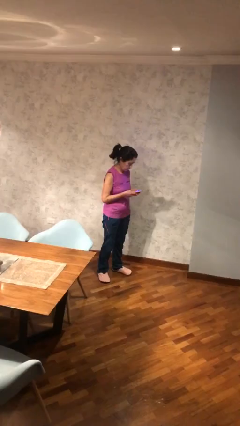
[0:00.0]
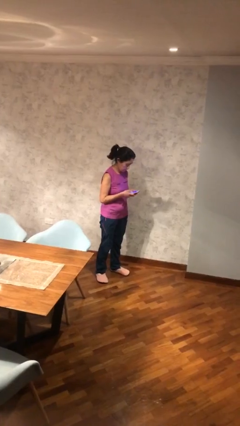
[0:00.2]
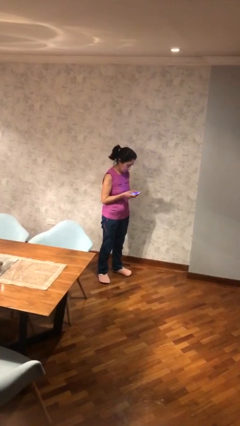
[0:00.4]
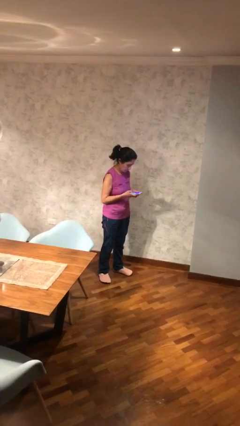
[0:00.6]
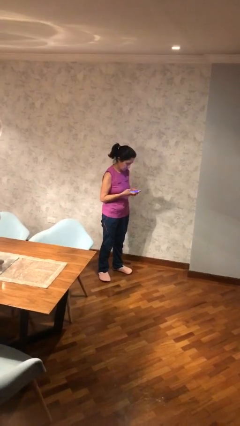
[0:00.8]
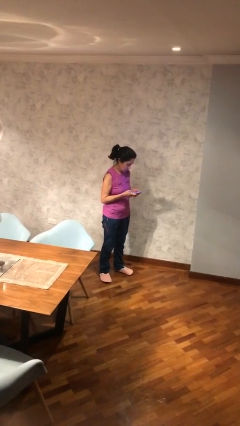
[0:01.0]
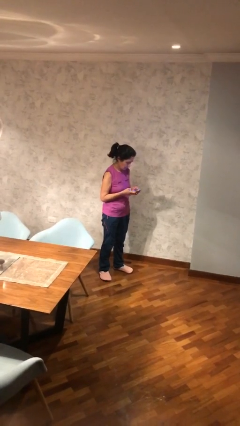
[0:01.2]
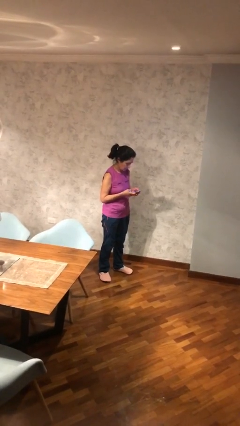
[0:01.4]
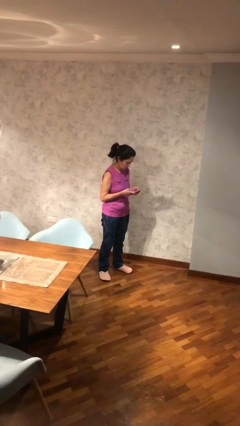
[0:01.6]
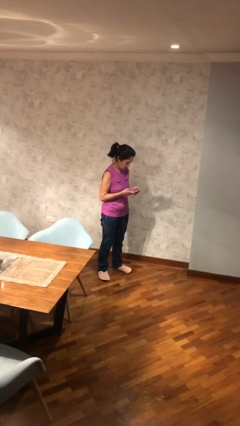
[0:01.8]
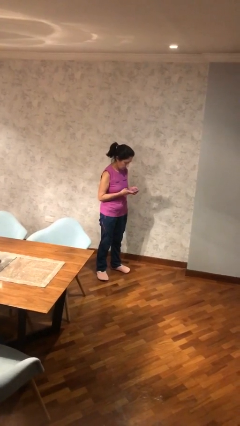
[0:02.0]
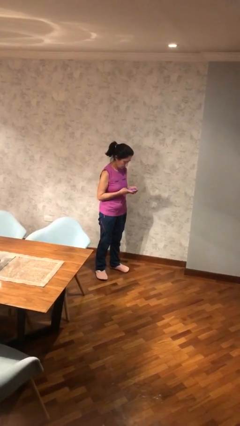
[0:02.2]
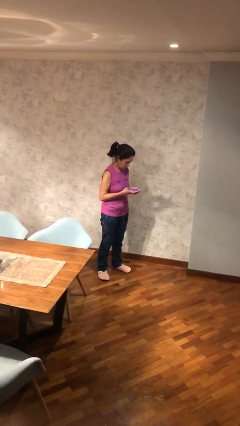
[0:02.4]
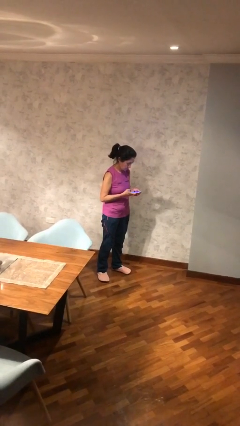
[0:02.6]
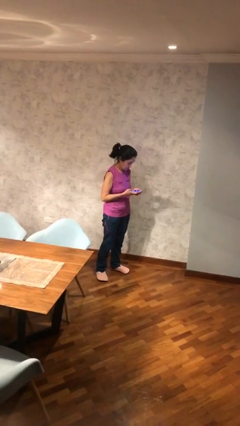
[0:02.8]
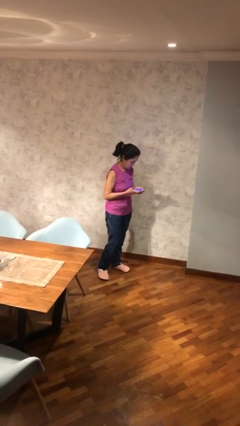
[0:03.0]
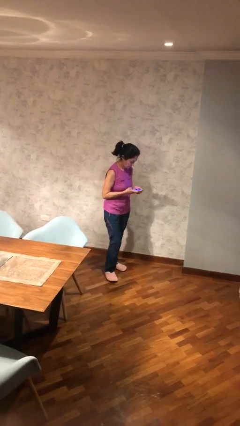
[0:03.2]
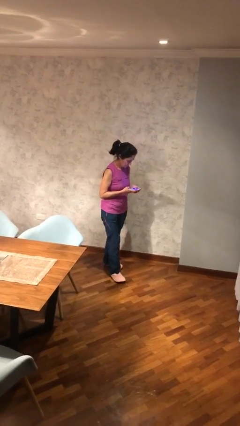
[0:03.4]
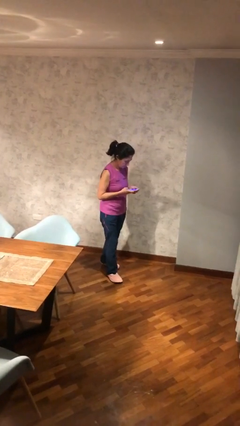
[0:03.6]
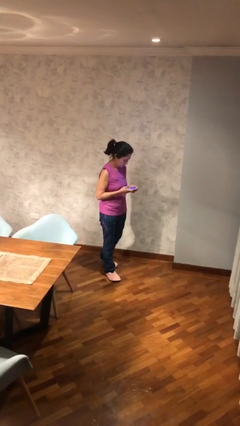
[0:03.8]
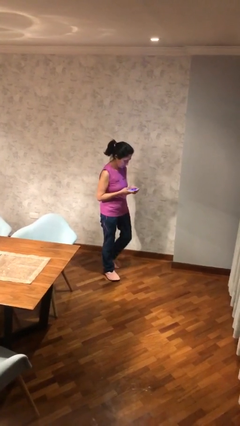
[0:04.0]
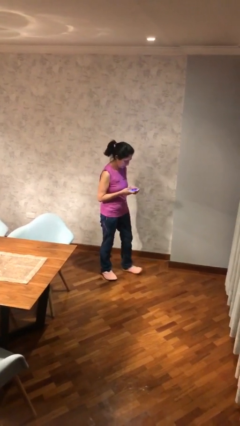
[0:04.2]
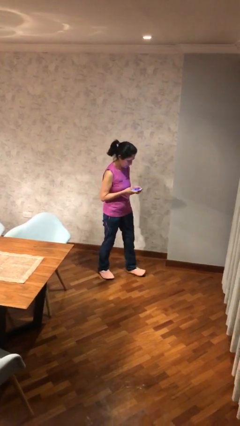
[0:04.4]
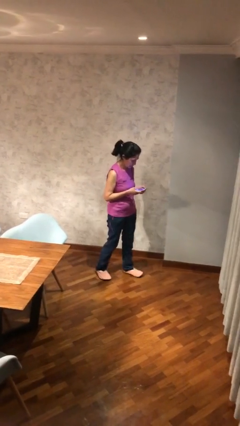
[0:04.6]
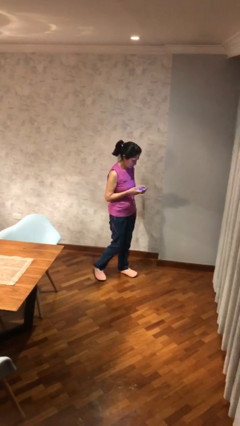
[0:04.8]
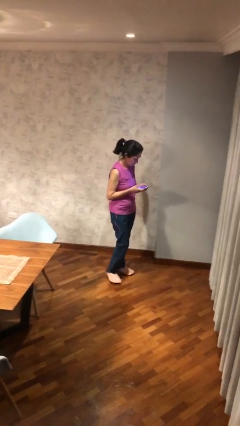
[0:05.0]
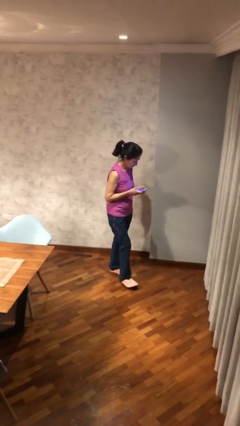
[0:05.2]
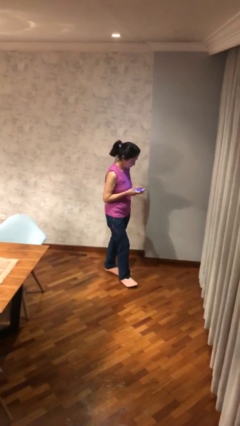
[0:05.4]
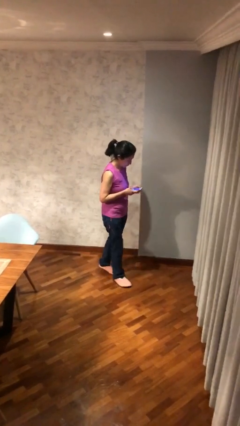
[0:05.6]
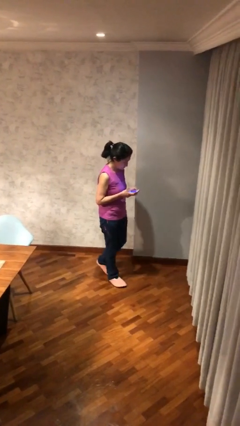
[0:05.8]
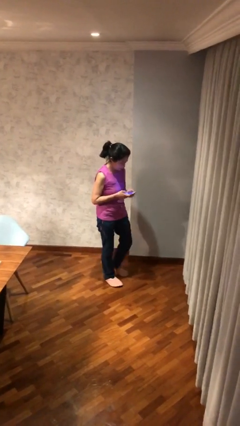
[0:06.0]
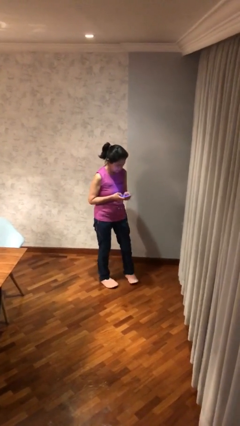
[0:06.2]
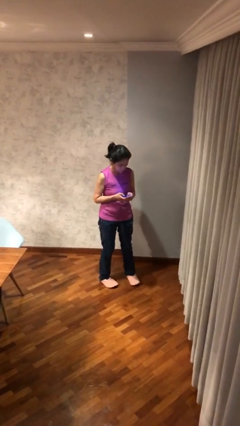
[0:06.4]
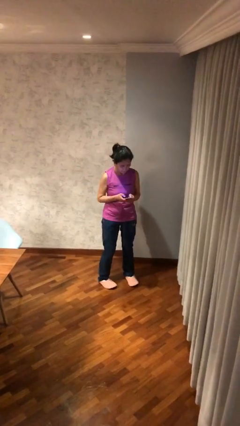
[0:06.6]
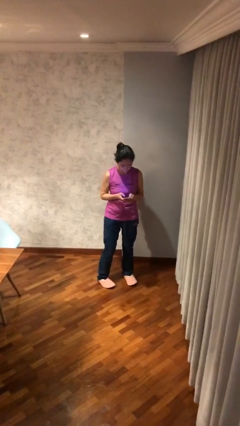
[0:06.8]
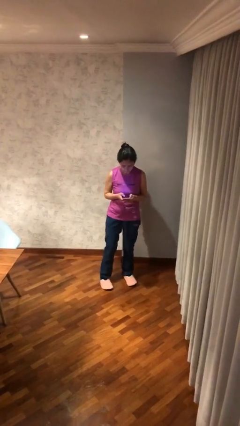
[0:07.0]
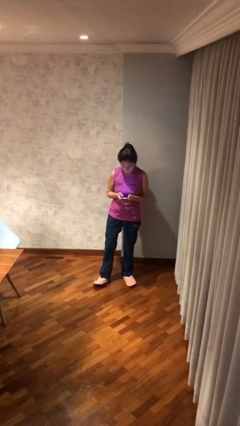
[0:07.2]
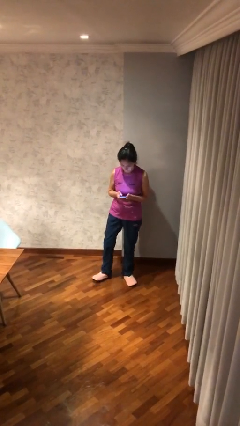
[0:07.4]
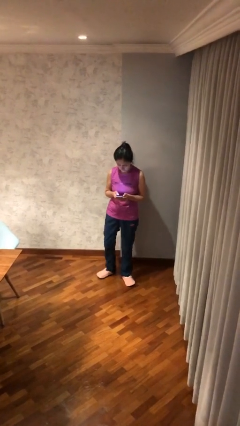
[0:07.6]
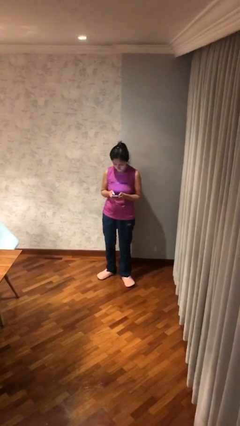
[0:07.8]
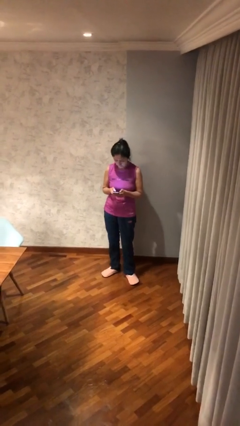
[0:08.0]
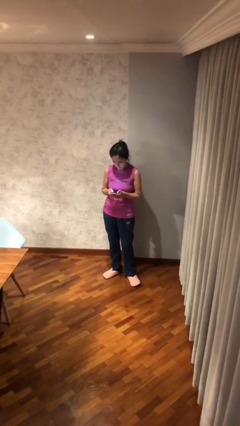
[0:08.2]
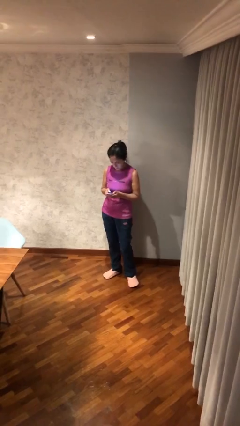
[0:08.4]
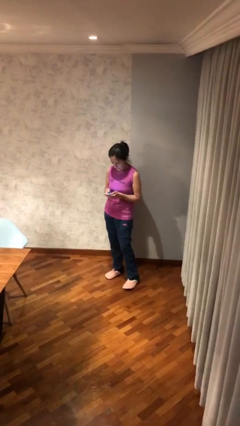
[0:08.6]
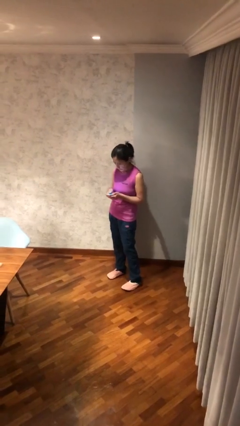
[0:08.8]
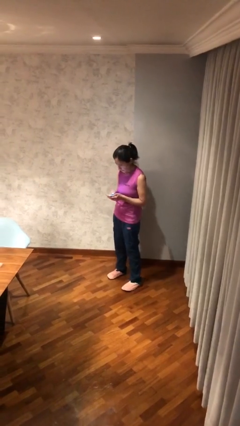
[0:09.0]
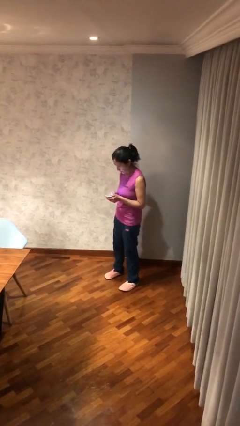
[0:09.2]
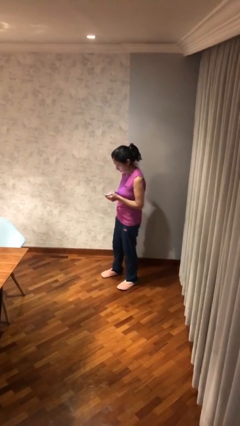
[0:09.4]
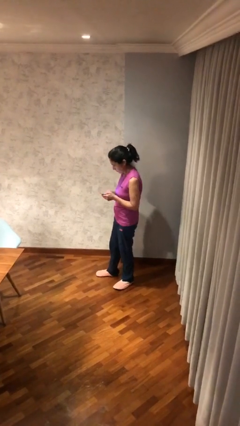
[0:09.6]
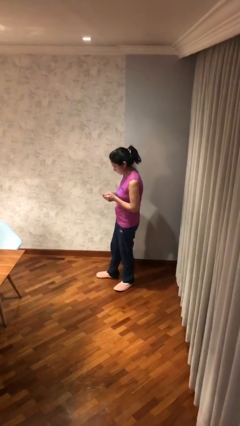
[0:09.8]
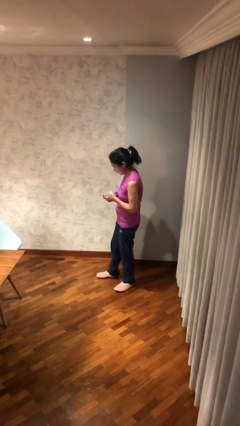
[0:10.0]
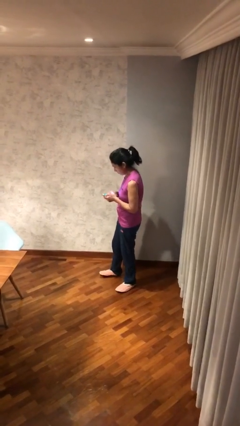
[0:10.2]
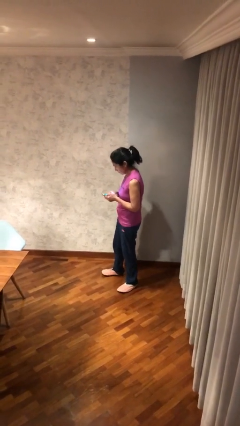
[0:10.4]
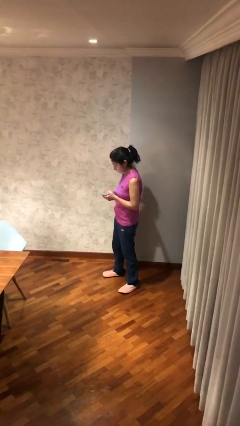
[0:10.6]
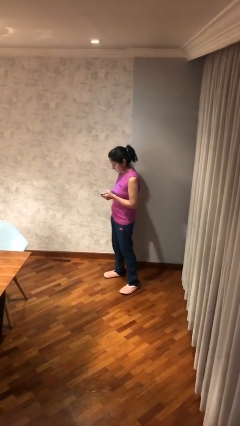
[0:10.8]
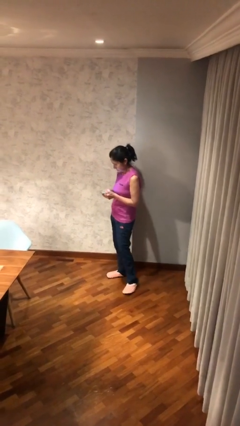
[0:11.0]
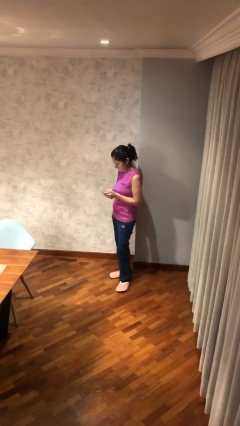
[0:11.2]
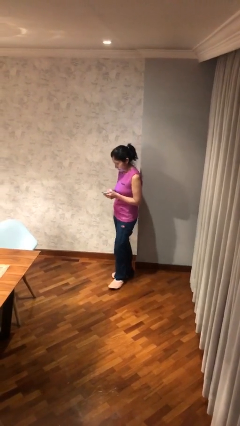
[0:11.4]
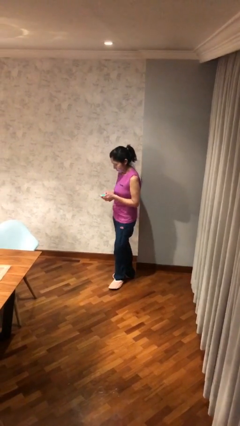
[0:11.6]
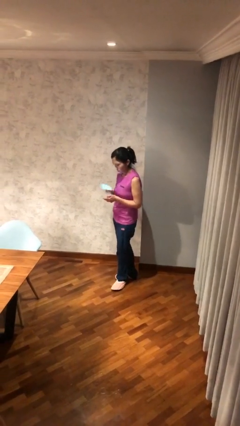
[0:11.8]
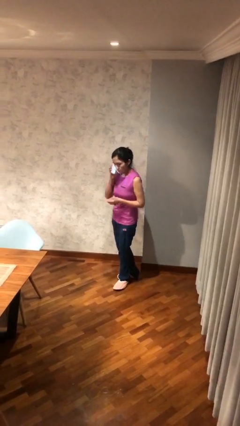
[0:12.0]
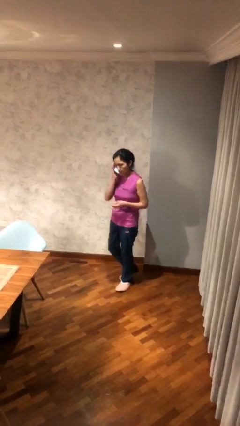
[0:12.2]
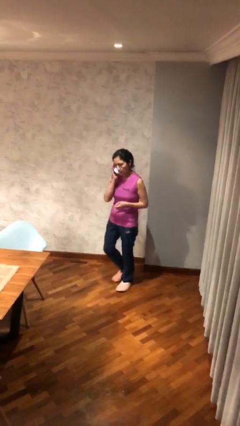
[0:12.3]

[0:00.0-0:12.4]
person texts on phone

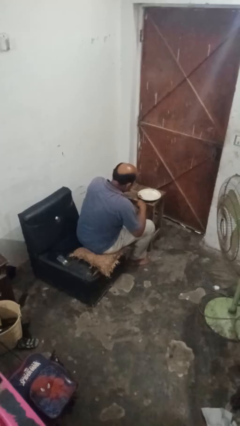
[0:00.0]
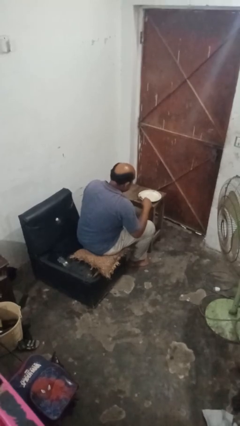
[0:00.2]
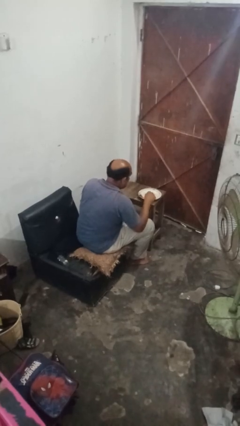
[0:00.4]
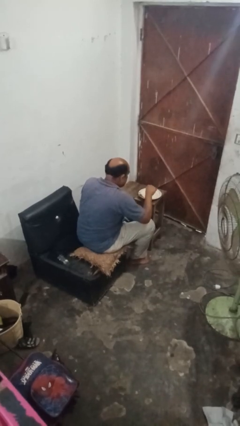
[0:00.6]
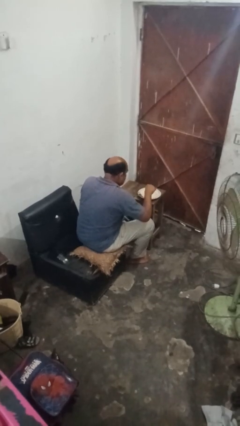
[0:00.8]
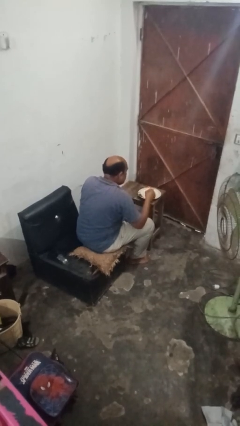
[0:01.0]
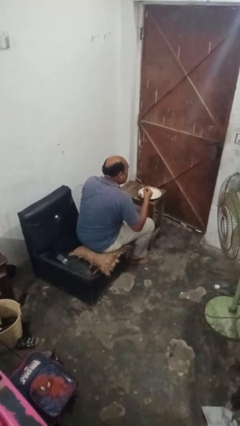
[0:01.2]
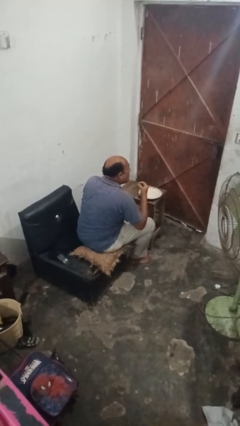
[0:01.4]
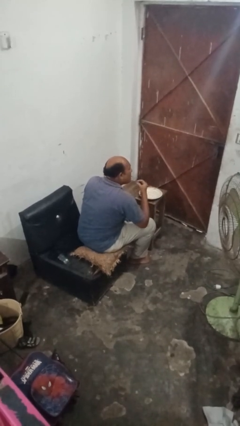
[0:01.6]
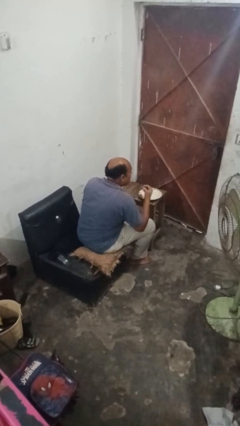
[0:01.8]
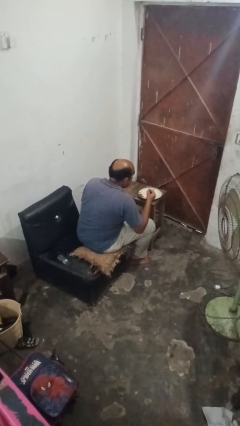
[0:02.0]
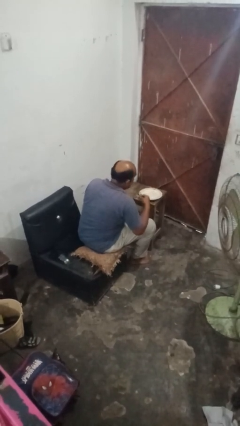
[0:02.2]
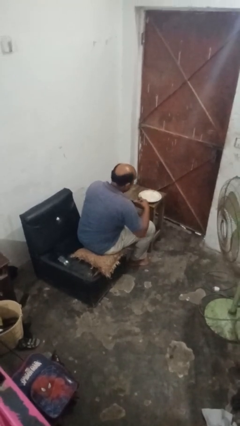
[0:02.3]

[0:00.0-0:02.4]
person eats with utensil

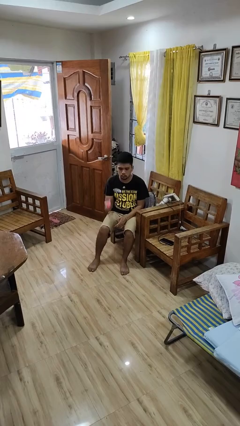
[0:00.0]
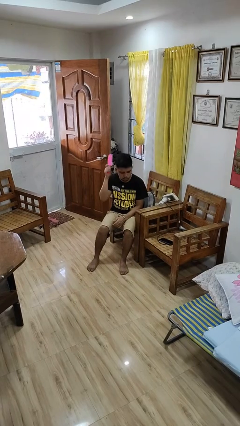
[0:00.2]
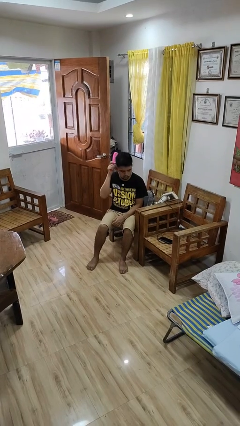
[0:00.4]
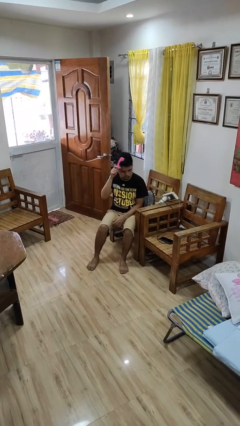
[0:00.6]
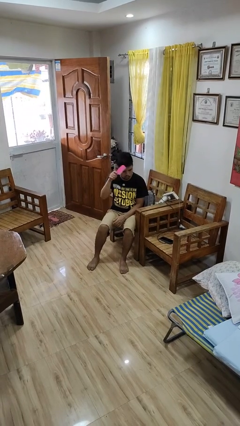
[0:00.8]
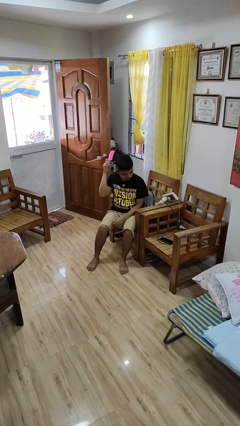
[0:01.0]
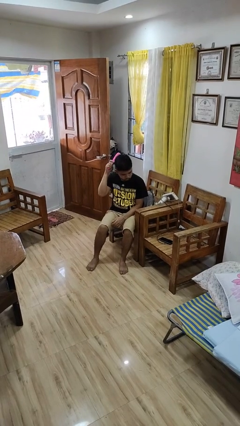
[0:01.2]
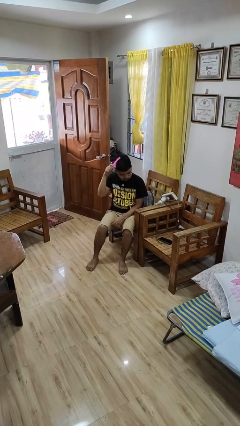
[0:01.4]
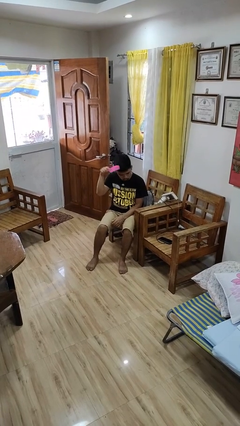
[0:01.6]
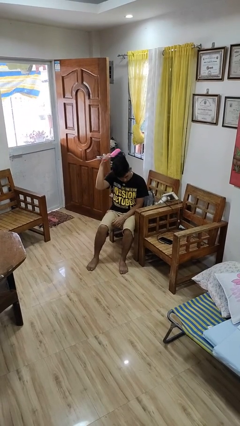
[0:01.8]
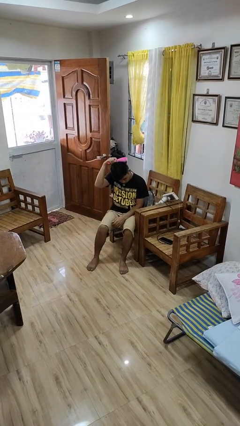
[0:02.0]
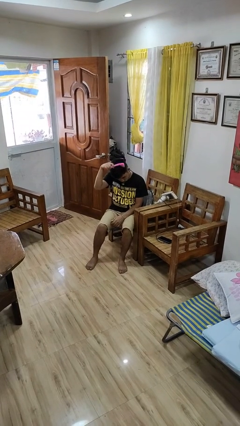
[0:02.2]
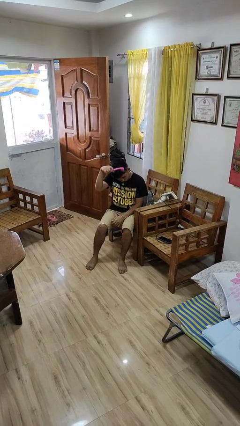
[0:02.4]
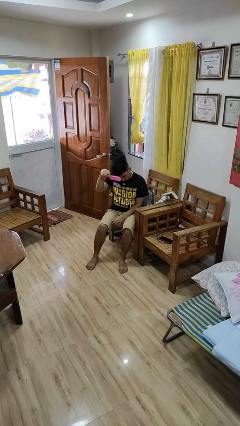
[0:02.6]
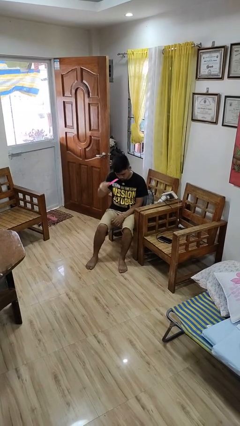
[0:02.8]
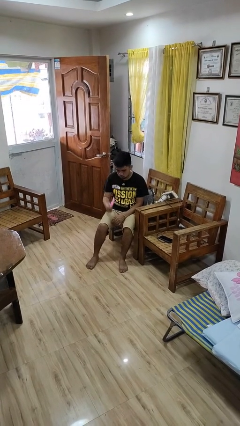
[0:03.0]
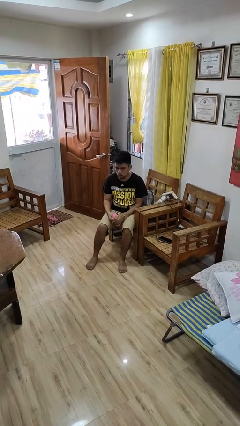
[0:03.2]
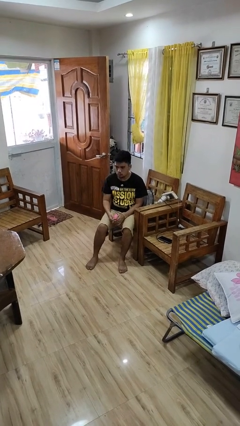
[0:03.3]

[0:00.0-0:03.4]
person brushes hair
